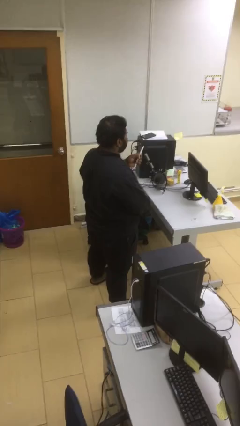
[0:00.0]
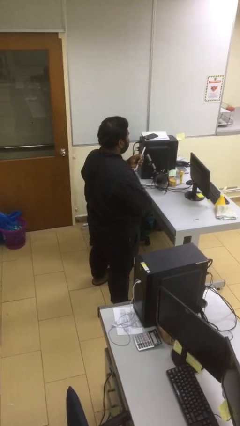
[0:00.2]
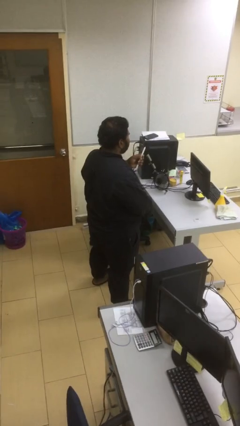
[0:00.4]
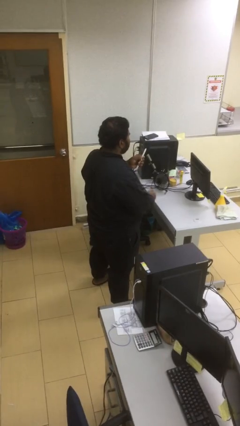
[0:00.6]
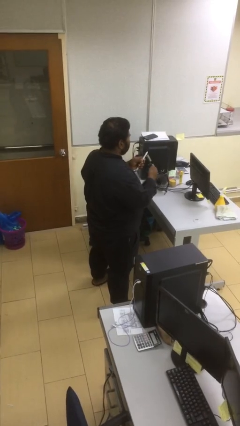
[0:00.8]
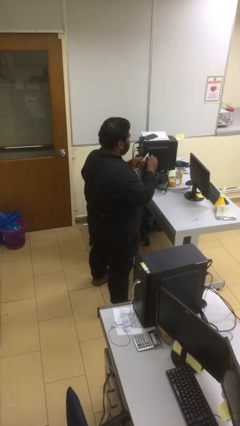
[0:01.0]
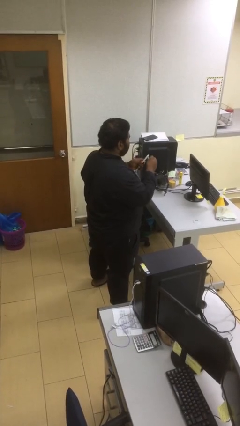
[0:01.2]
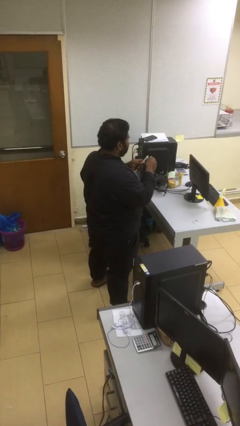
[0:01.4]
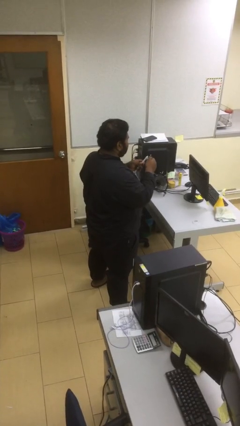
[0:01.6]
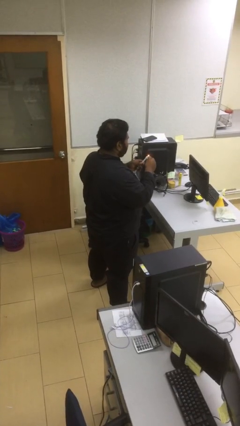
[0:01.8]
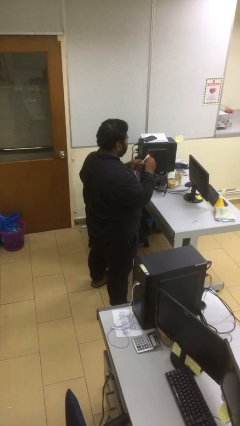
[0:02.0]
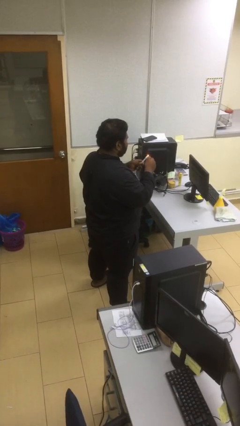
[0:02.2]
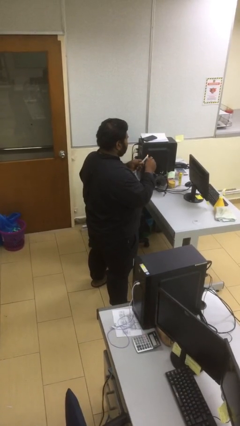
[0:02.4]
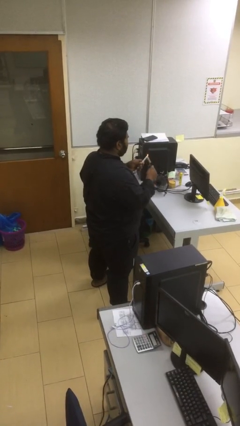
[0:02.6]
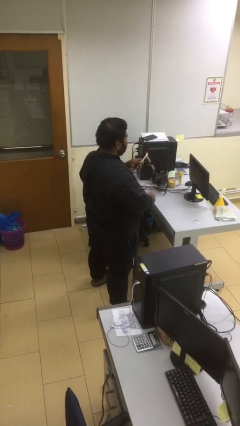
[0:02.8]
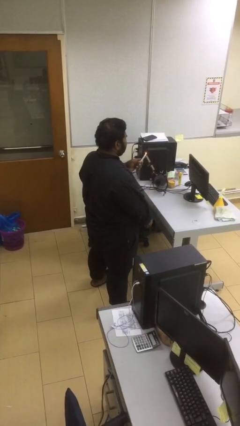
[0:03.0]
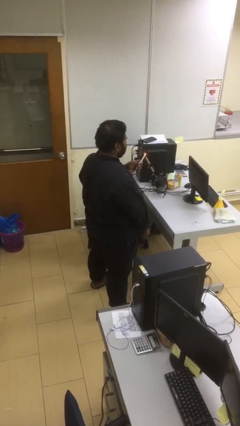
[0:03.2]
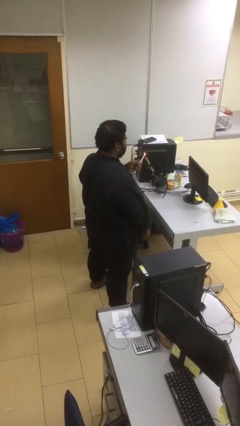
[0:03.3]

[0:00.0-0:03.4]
person lights candle

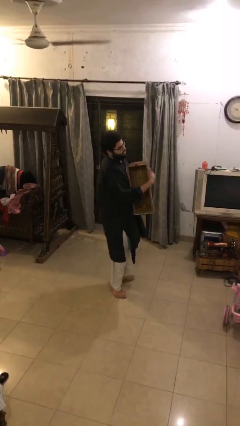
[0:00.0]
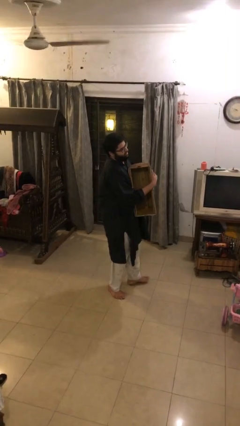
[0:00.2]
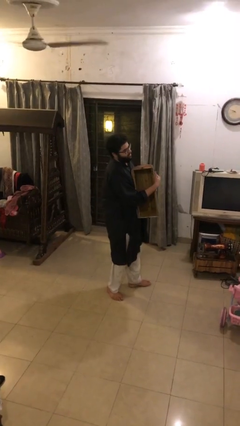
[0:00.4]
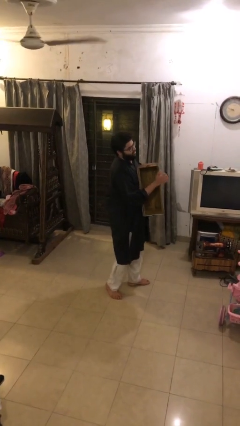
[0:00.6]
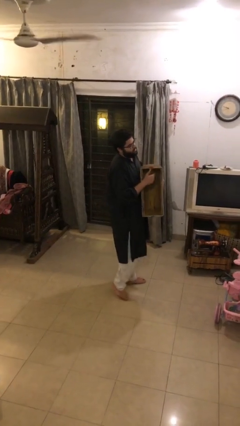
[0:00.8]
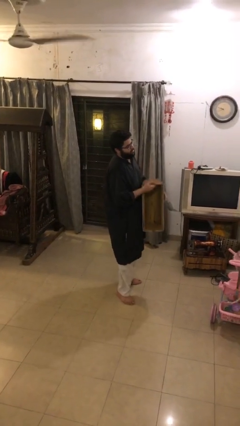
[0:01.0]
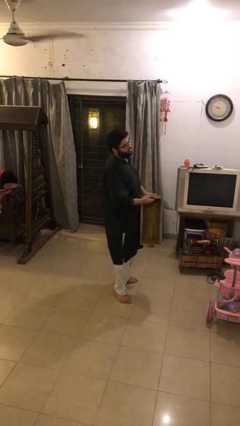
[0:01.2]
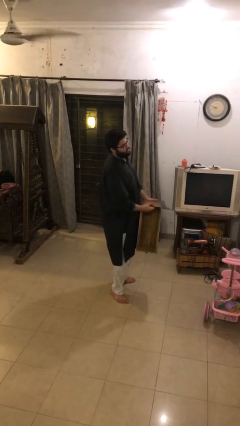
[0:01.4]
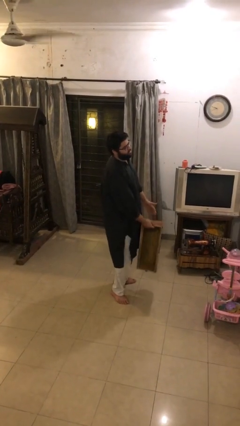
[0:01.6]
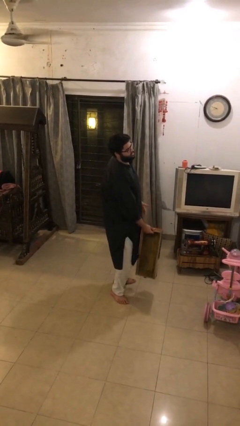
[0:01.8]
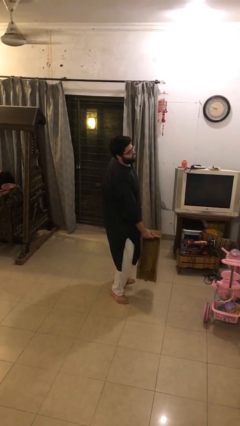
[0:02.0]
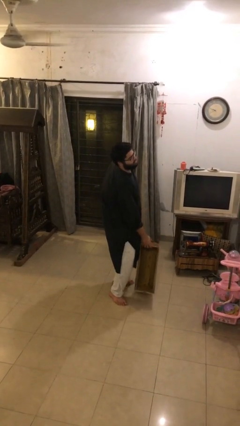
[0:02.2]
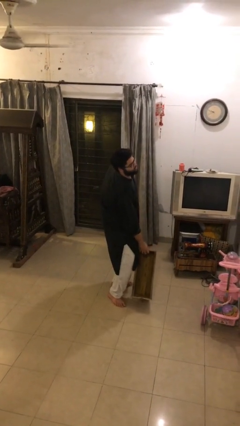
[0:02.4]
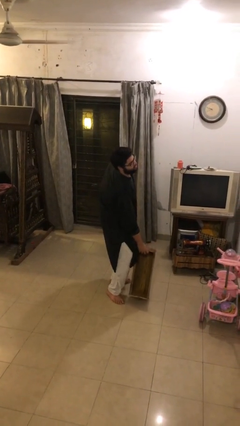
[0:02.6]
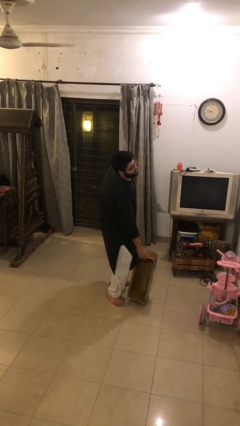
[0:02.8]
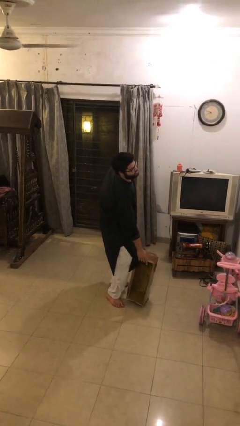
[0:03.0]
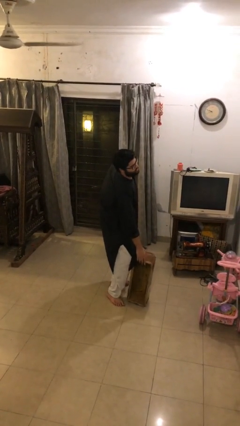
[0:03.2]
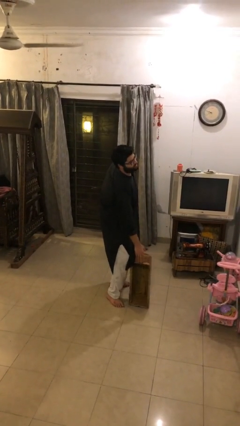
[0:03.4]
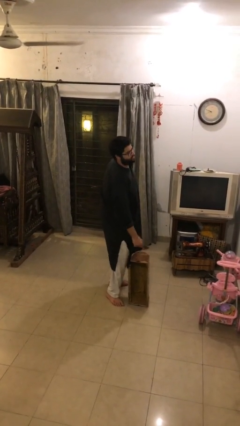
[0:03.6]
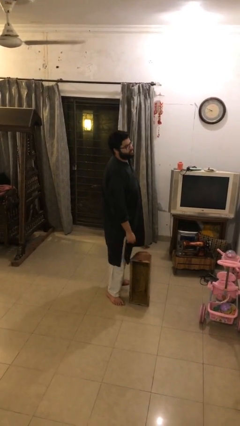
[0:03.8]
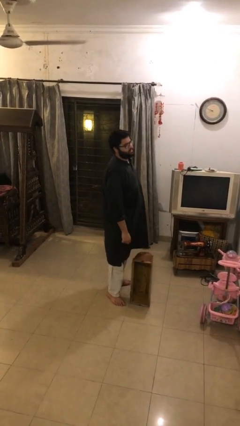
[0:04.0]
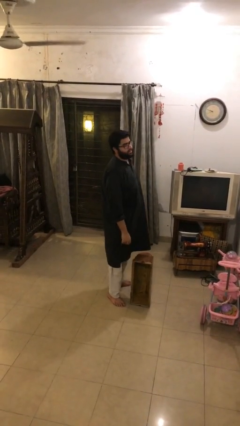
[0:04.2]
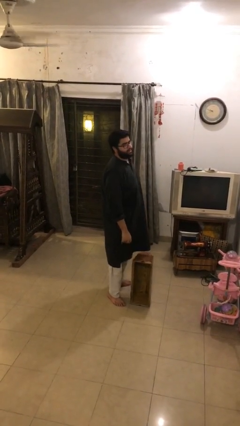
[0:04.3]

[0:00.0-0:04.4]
person puts down object on floor

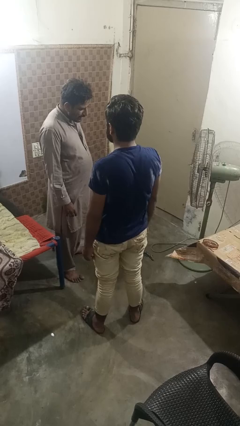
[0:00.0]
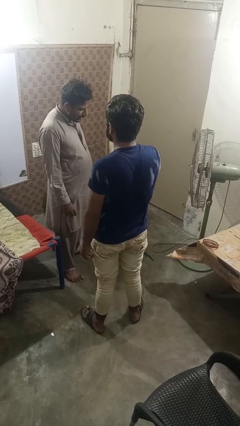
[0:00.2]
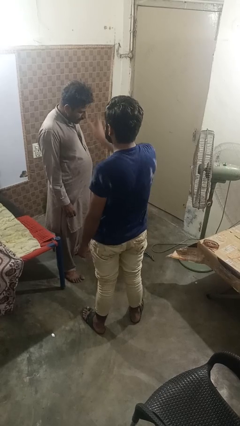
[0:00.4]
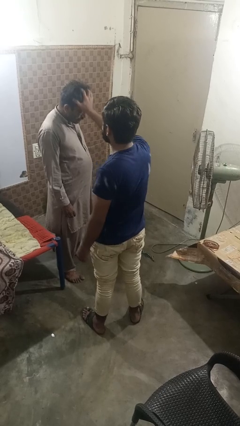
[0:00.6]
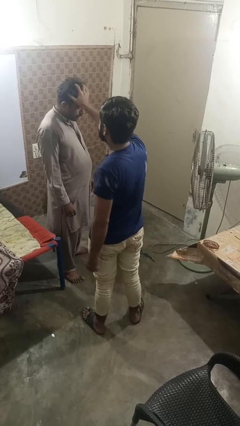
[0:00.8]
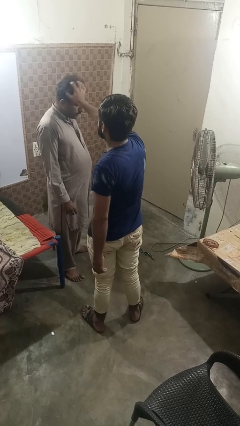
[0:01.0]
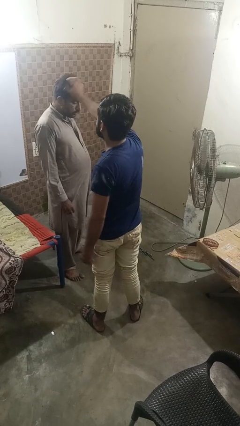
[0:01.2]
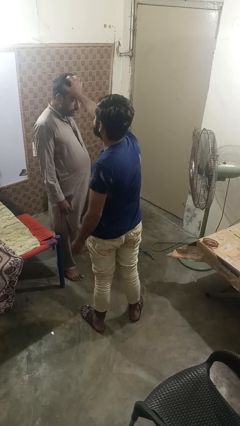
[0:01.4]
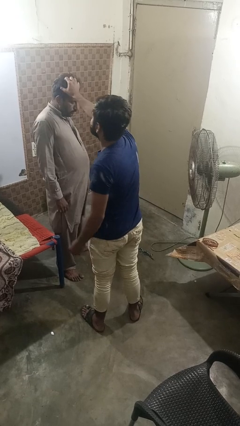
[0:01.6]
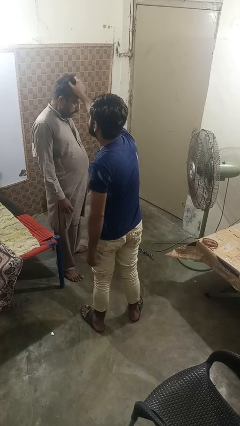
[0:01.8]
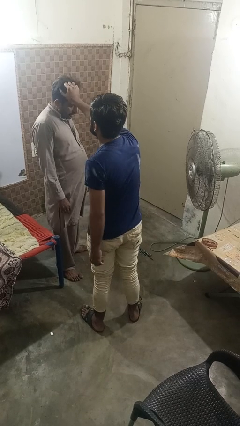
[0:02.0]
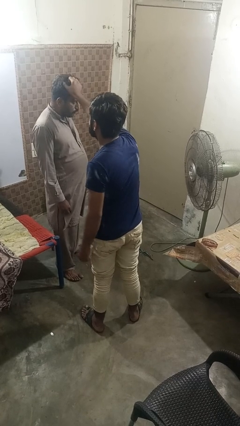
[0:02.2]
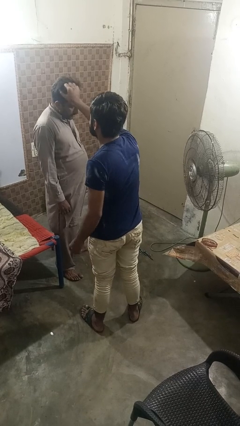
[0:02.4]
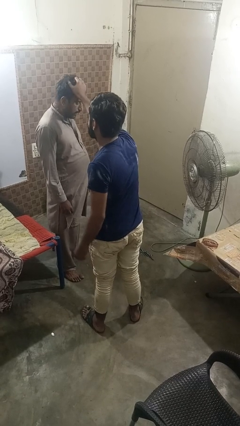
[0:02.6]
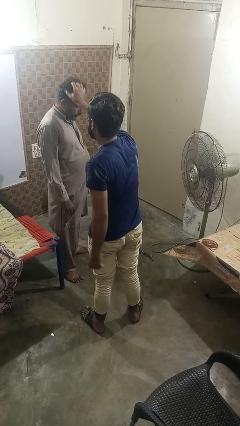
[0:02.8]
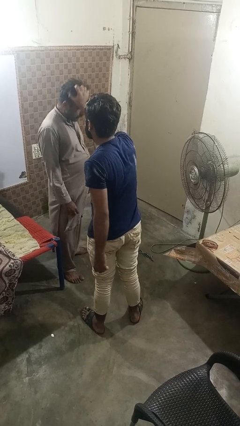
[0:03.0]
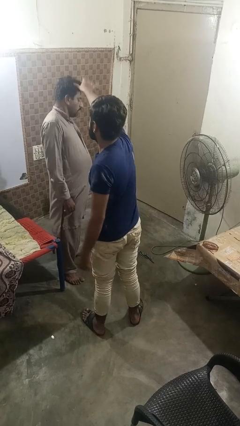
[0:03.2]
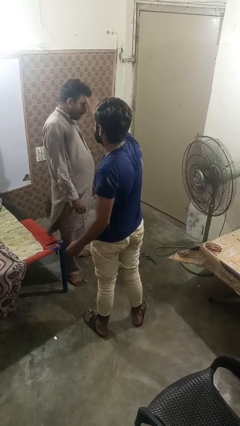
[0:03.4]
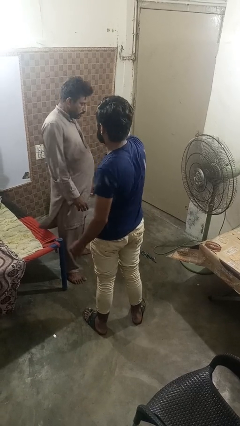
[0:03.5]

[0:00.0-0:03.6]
person grabs person by hair

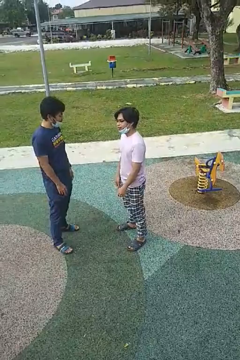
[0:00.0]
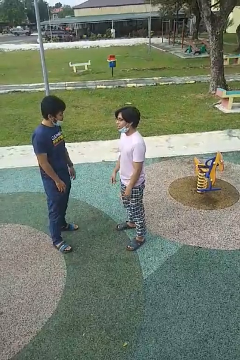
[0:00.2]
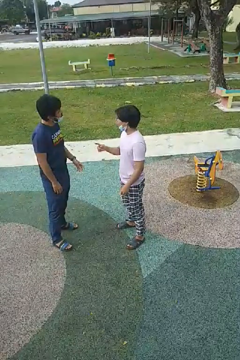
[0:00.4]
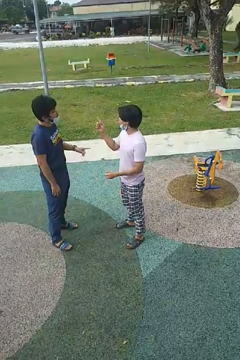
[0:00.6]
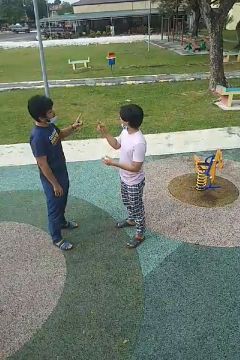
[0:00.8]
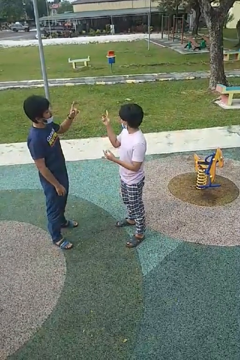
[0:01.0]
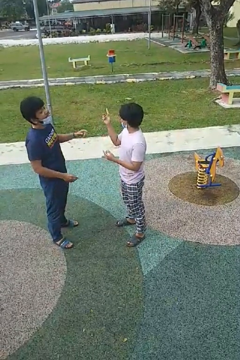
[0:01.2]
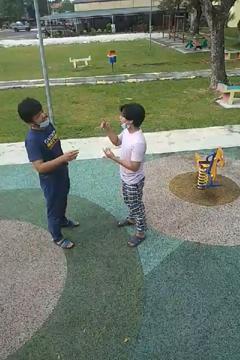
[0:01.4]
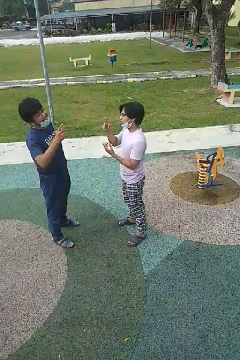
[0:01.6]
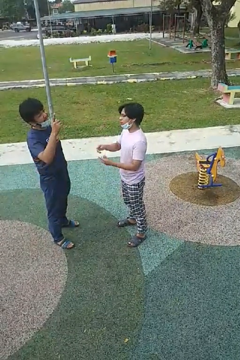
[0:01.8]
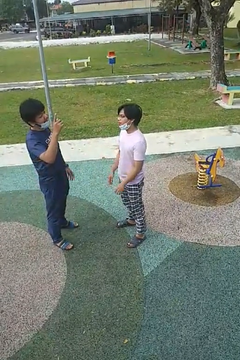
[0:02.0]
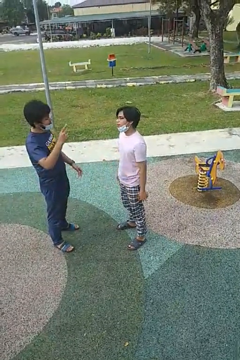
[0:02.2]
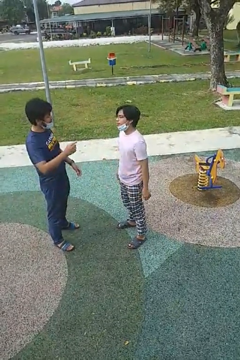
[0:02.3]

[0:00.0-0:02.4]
person talks to person

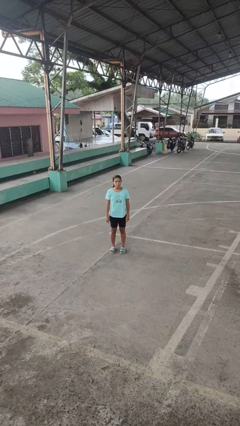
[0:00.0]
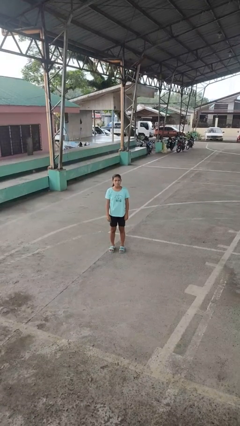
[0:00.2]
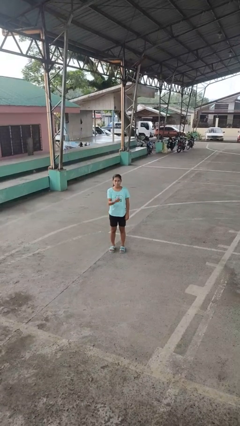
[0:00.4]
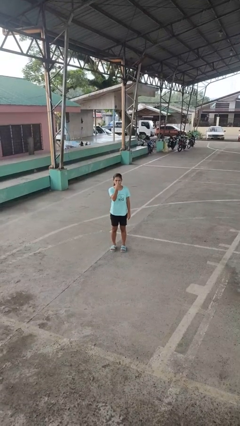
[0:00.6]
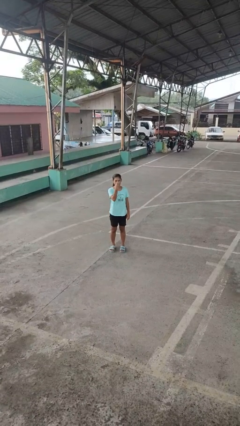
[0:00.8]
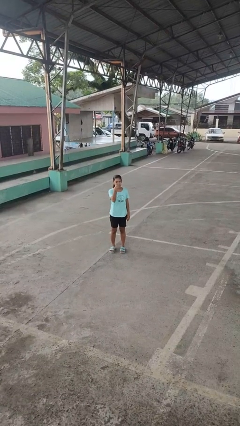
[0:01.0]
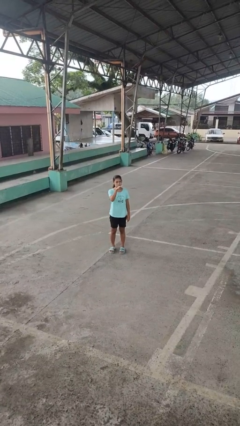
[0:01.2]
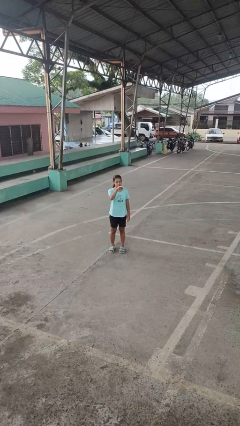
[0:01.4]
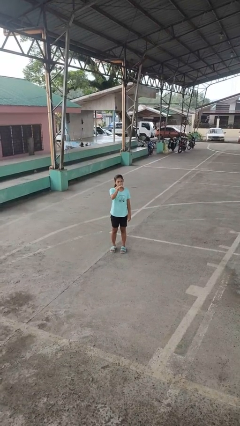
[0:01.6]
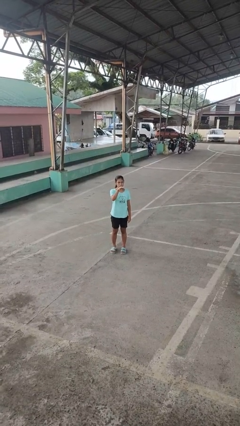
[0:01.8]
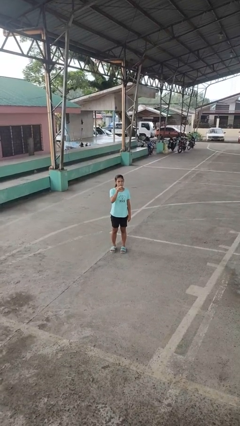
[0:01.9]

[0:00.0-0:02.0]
person gestures watch closely

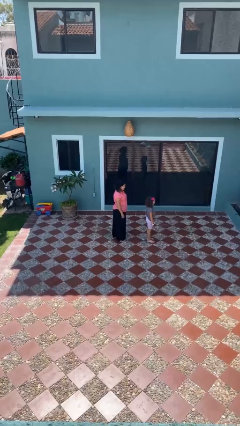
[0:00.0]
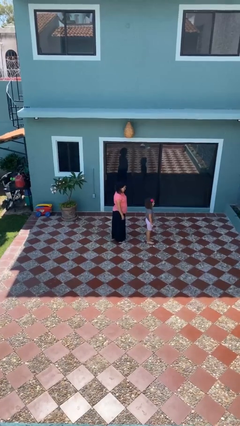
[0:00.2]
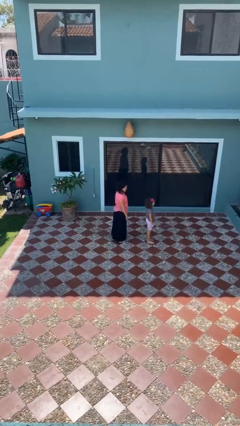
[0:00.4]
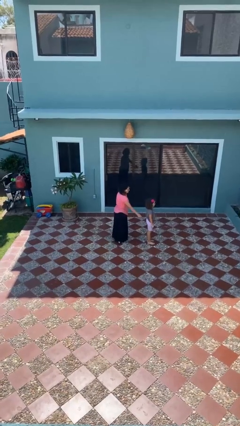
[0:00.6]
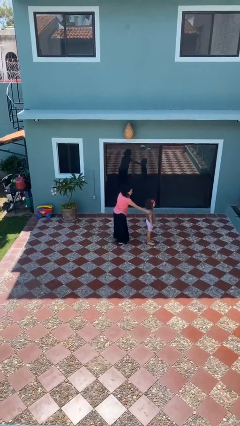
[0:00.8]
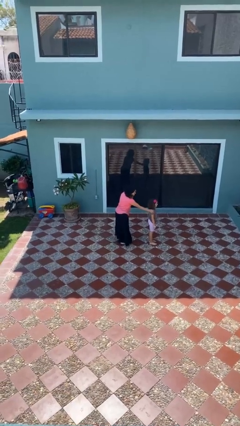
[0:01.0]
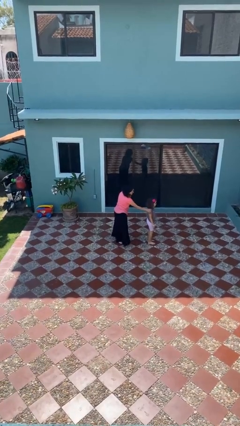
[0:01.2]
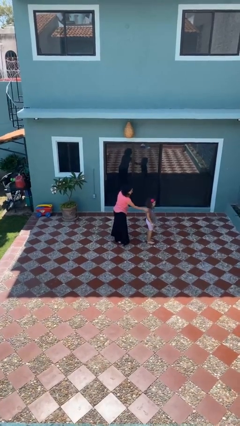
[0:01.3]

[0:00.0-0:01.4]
person grabs person by shoulder

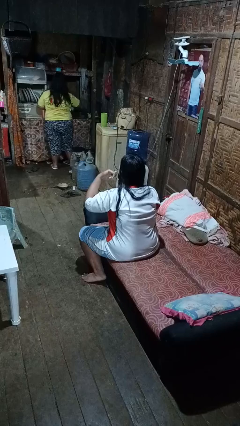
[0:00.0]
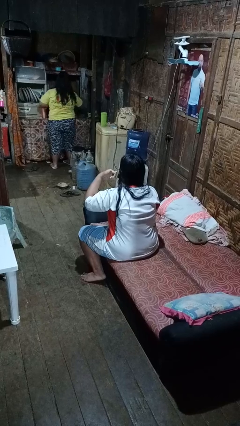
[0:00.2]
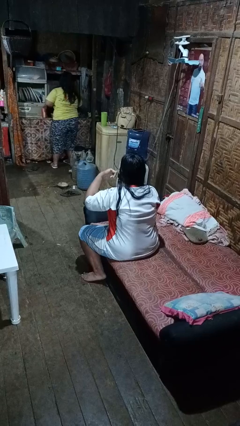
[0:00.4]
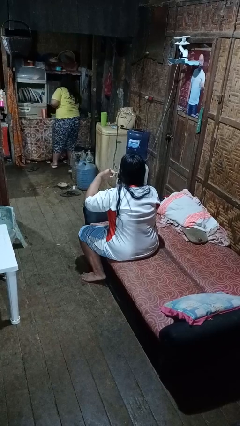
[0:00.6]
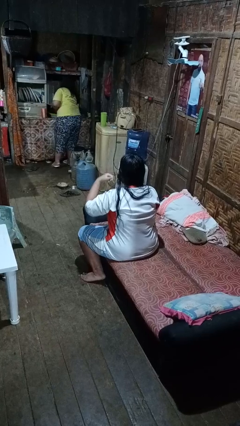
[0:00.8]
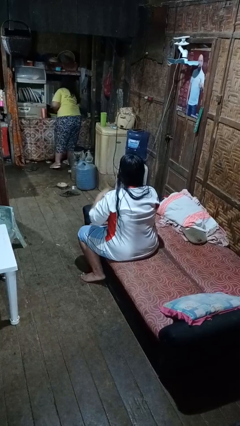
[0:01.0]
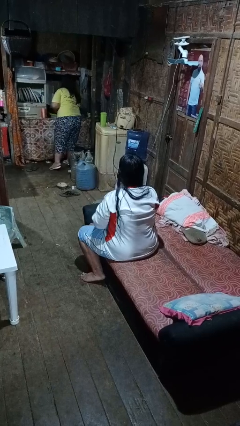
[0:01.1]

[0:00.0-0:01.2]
person gestures call me
